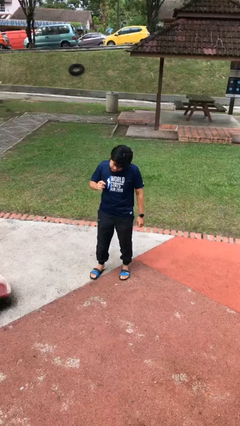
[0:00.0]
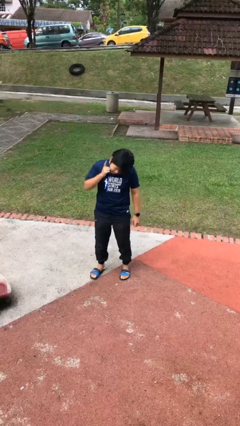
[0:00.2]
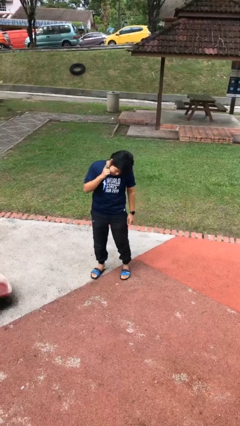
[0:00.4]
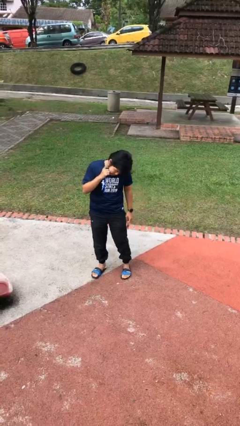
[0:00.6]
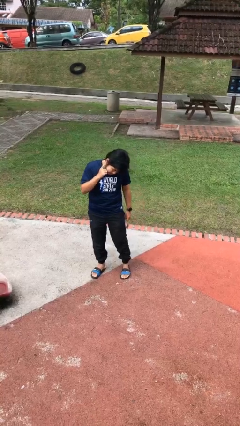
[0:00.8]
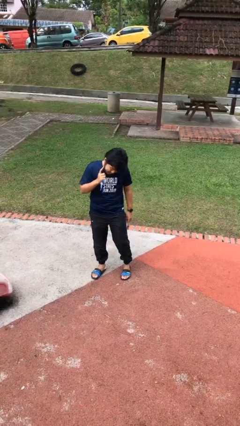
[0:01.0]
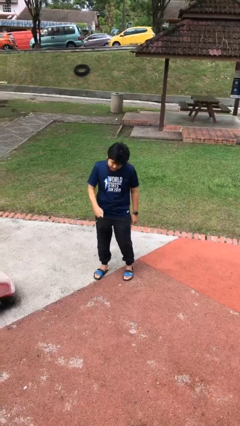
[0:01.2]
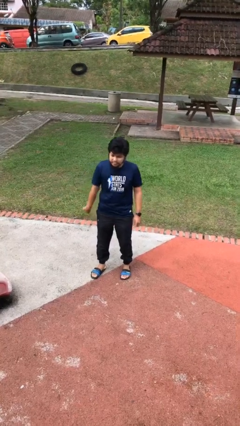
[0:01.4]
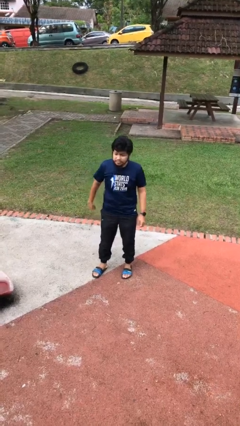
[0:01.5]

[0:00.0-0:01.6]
person gestures listen closely

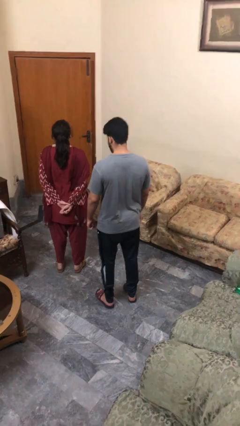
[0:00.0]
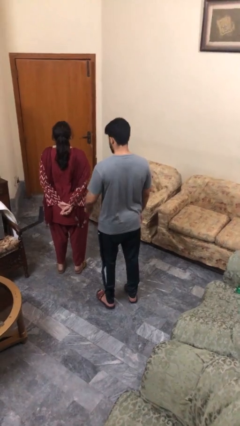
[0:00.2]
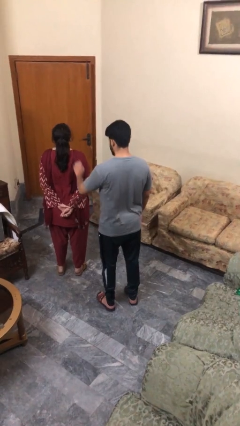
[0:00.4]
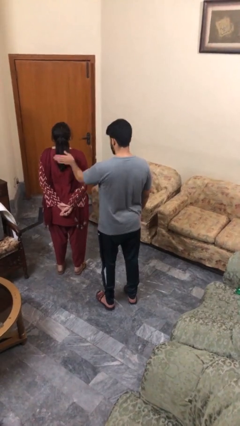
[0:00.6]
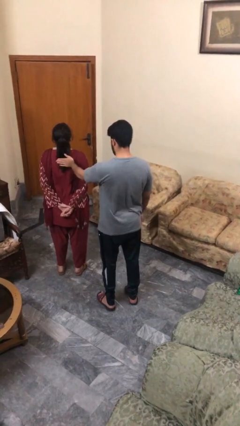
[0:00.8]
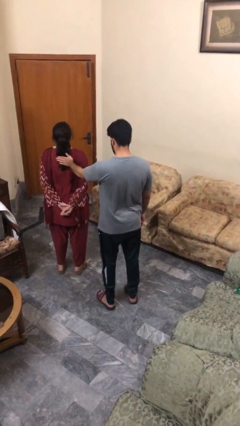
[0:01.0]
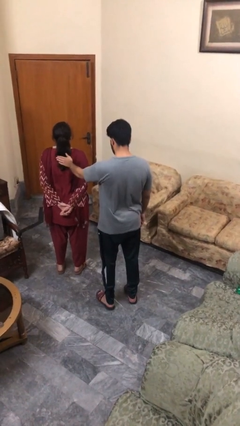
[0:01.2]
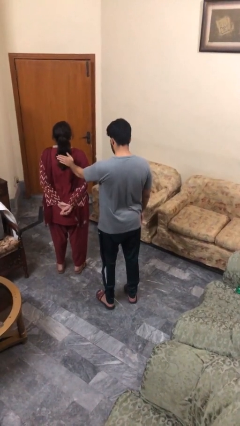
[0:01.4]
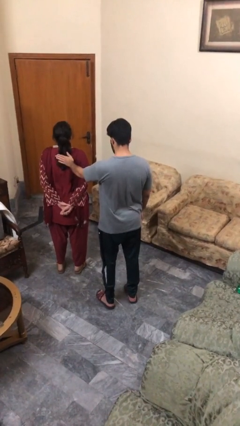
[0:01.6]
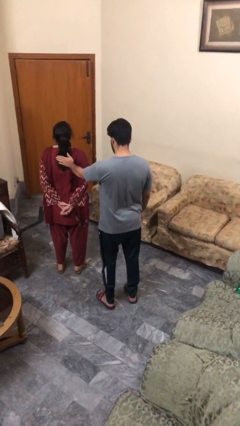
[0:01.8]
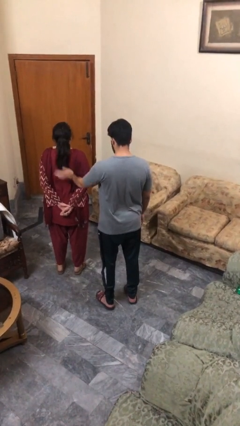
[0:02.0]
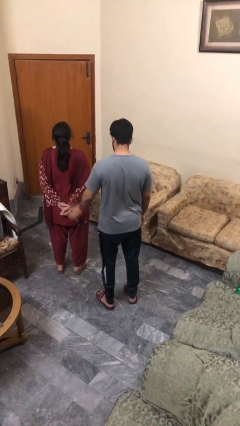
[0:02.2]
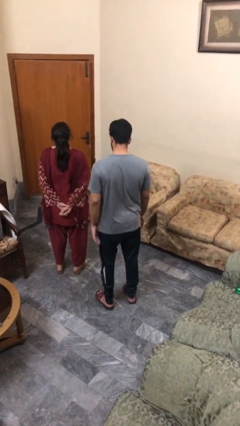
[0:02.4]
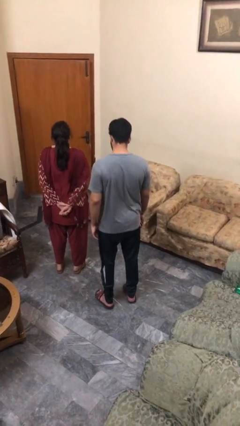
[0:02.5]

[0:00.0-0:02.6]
person touches back of person

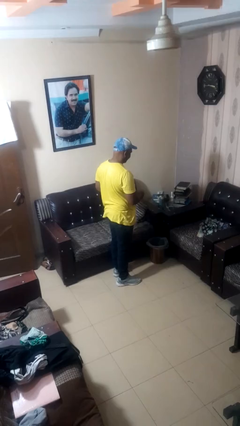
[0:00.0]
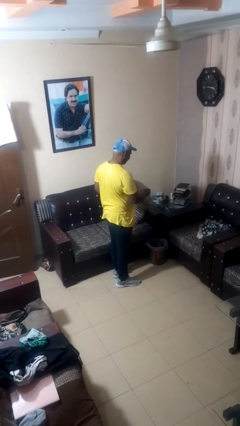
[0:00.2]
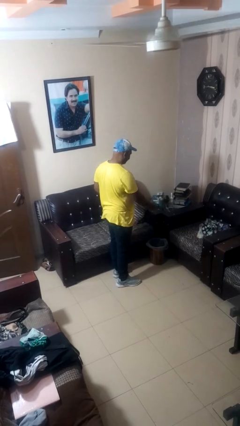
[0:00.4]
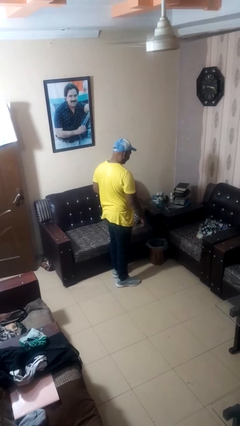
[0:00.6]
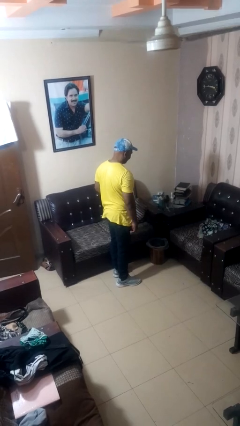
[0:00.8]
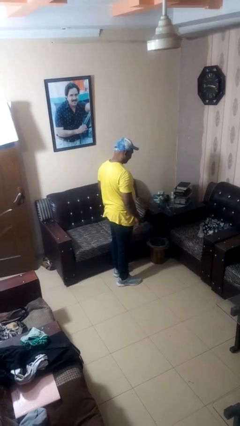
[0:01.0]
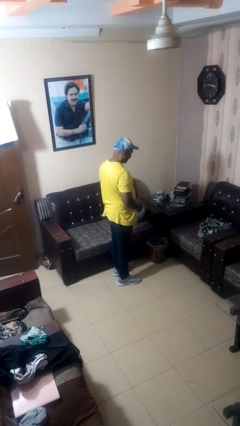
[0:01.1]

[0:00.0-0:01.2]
person discards trash

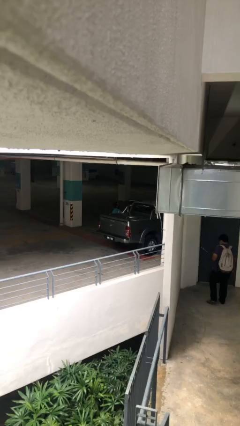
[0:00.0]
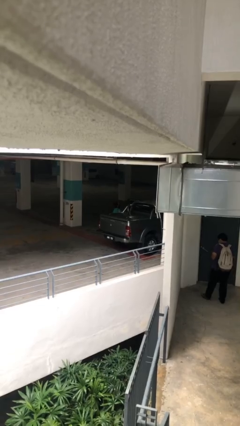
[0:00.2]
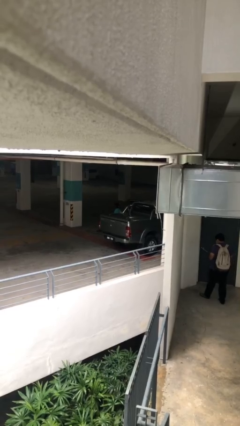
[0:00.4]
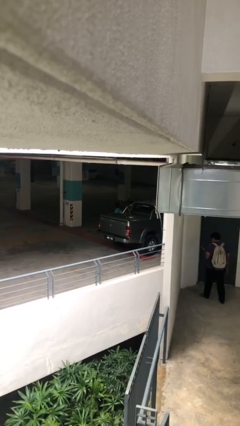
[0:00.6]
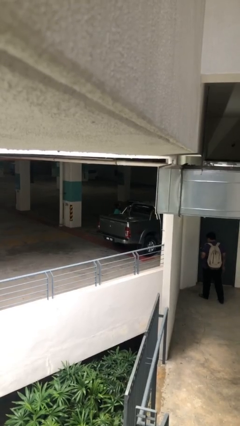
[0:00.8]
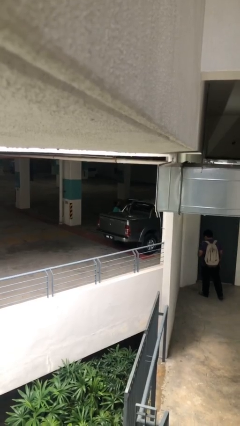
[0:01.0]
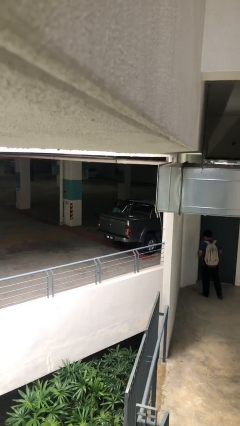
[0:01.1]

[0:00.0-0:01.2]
person opens car door

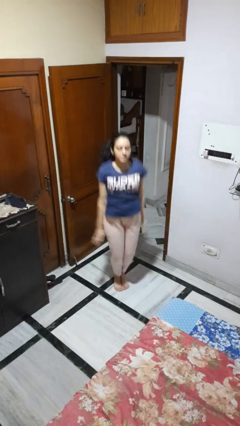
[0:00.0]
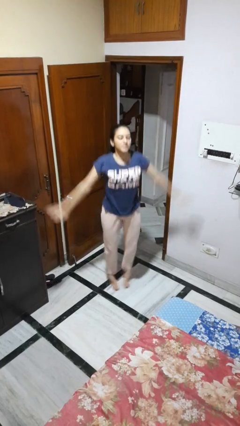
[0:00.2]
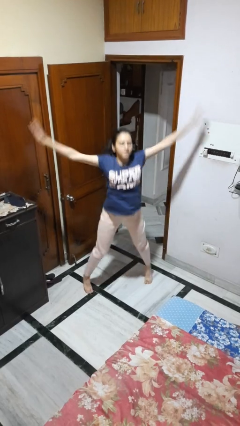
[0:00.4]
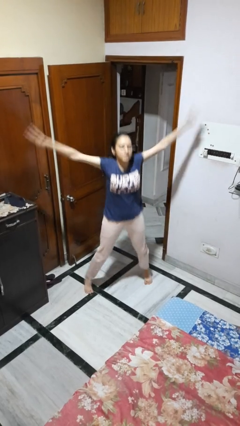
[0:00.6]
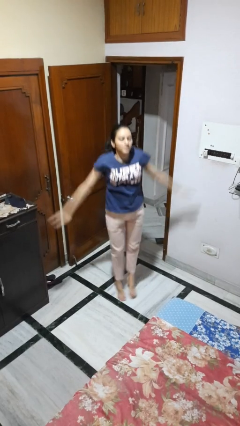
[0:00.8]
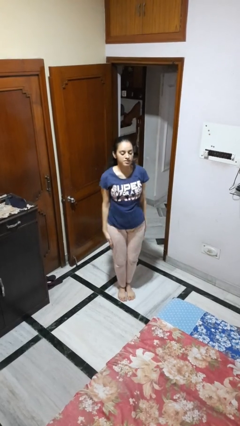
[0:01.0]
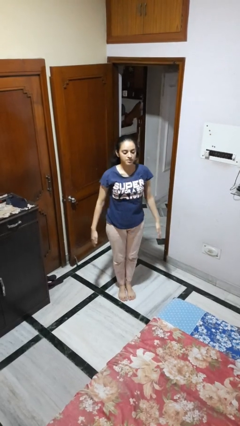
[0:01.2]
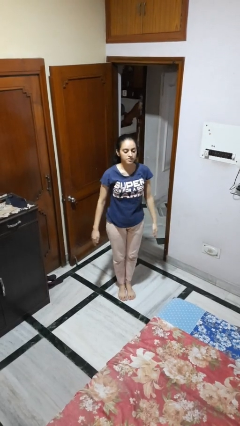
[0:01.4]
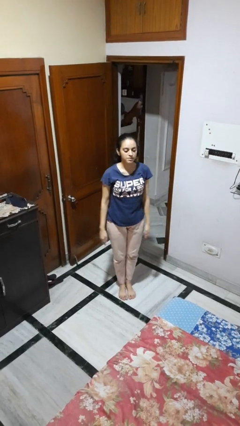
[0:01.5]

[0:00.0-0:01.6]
person exercises with jumping jacks

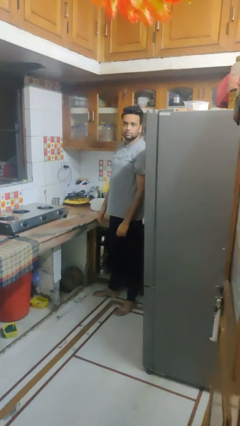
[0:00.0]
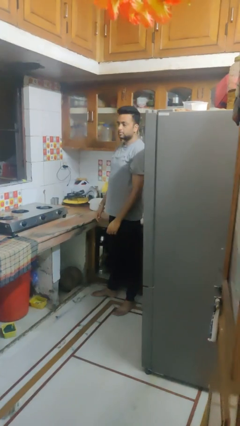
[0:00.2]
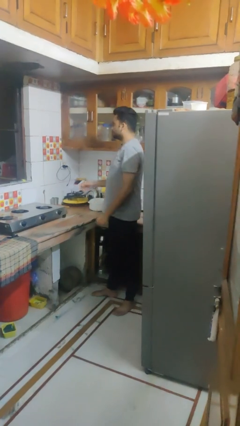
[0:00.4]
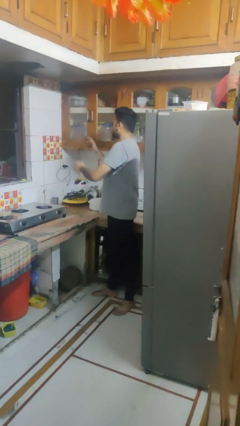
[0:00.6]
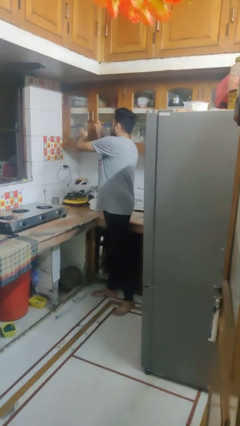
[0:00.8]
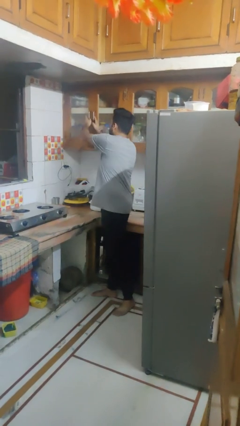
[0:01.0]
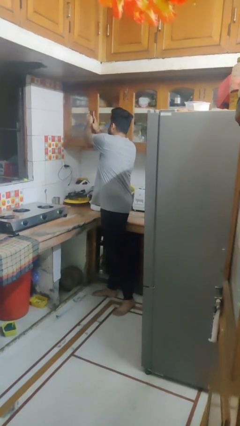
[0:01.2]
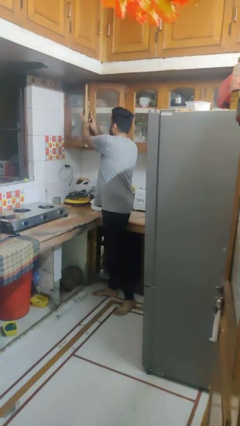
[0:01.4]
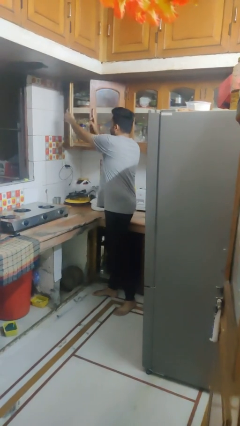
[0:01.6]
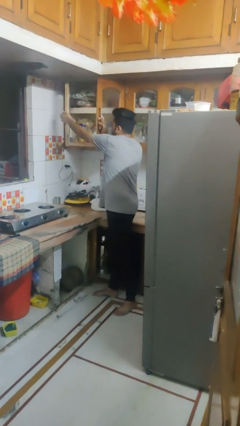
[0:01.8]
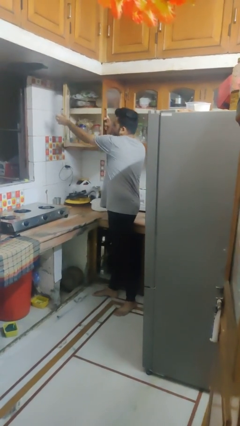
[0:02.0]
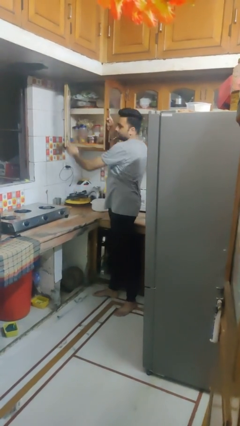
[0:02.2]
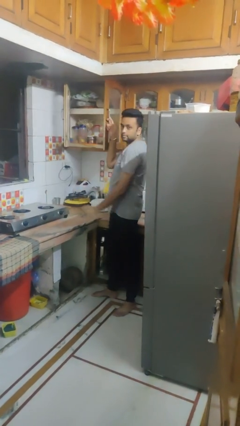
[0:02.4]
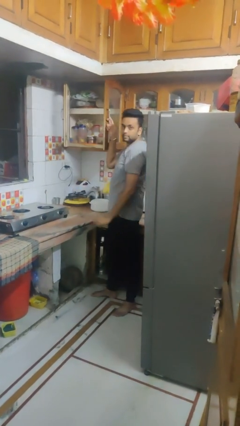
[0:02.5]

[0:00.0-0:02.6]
person opens cabinet

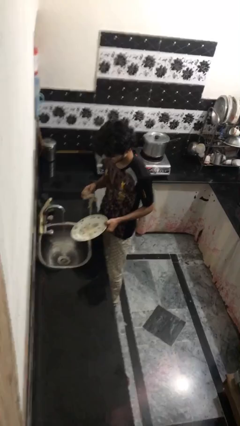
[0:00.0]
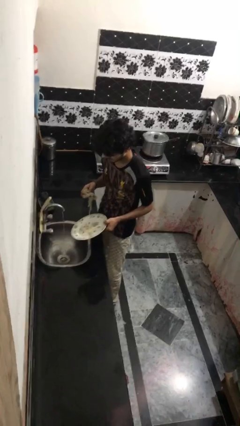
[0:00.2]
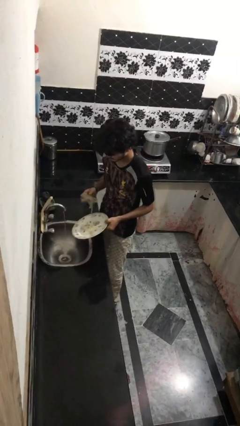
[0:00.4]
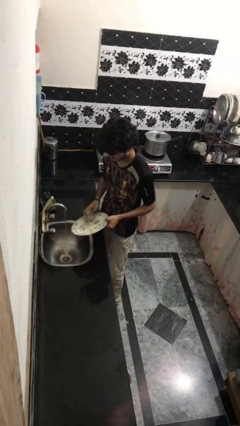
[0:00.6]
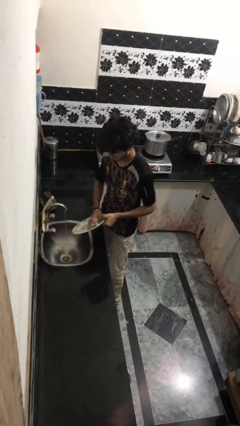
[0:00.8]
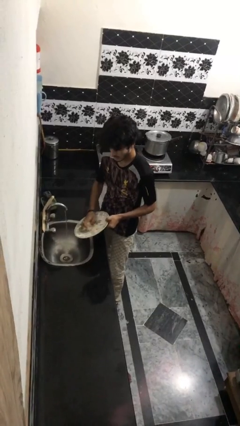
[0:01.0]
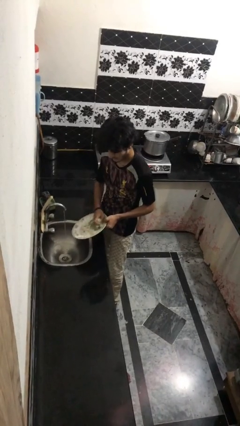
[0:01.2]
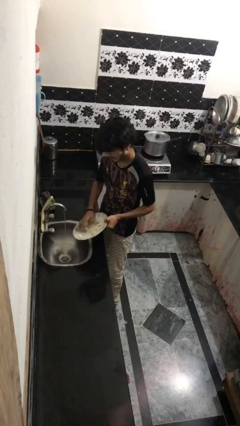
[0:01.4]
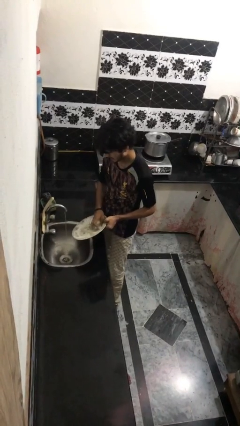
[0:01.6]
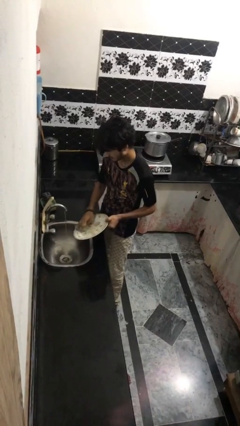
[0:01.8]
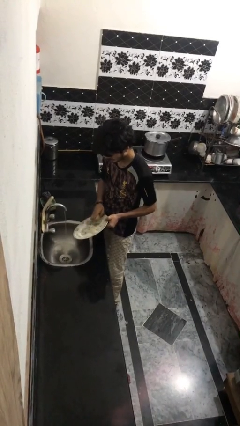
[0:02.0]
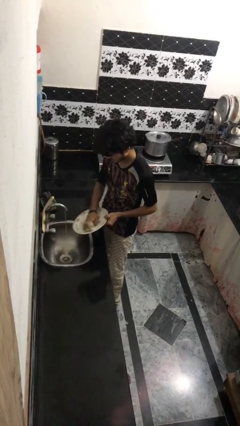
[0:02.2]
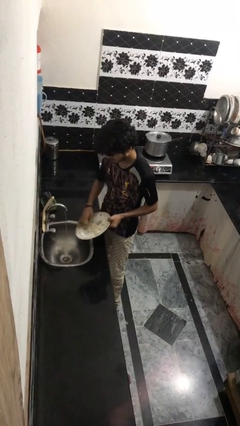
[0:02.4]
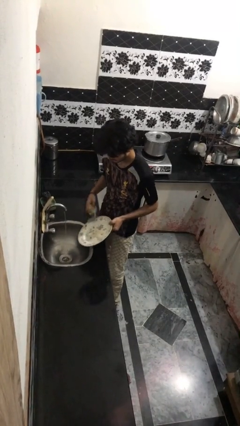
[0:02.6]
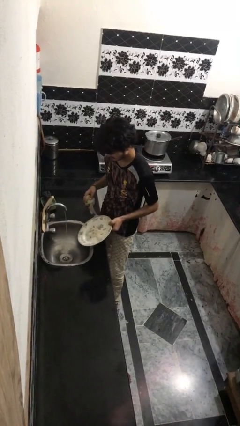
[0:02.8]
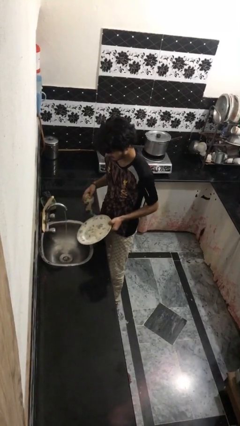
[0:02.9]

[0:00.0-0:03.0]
person washes dish

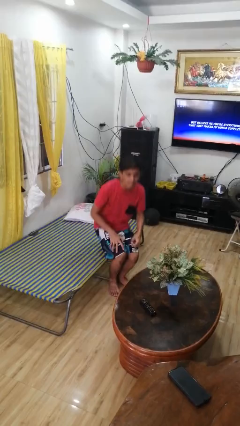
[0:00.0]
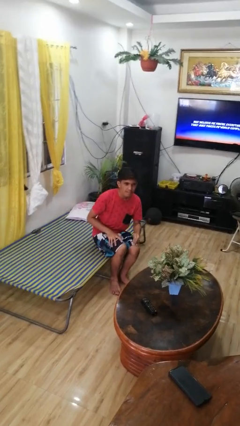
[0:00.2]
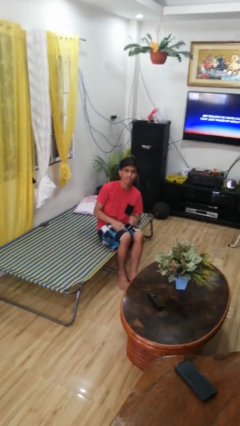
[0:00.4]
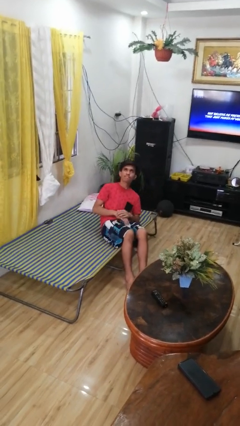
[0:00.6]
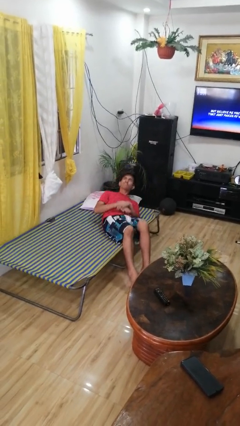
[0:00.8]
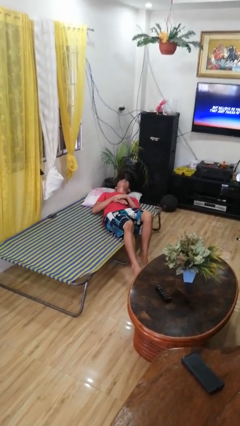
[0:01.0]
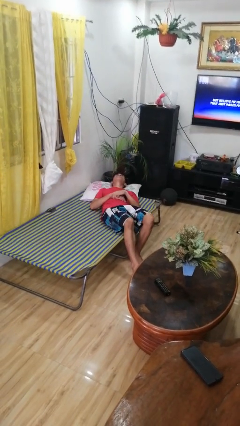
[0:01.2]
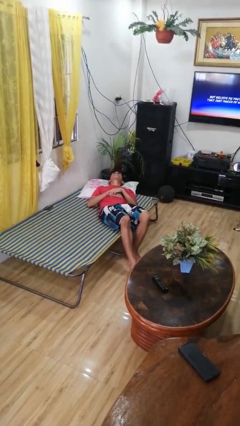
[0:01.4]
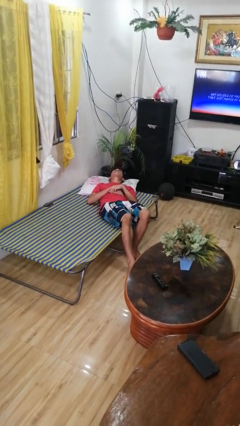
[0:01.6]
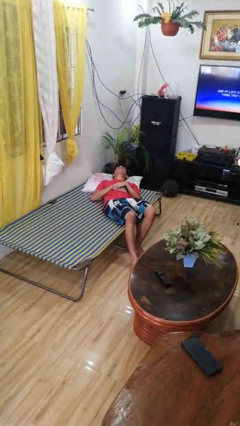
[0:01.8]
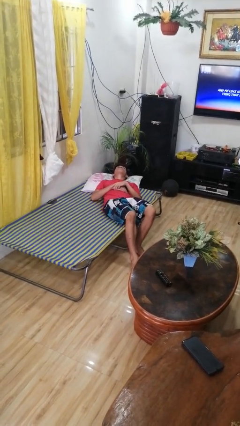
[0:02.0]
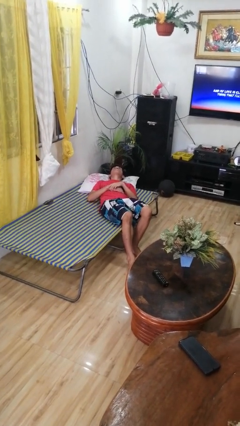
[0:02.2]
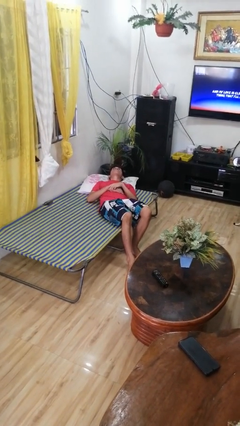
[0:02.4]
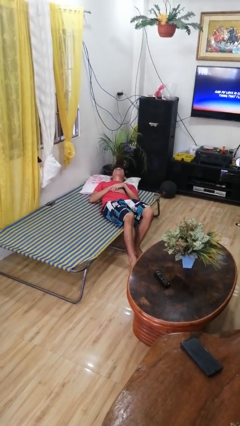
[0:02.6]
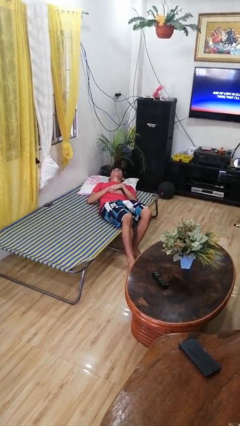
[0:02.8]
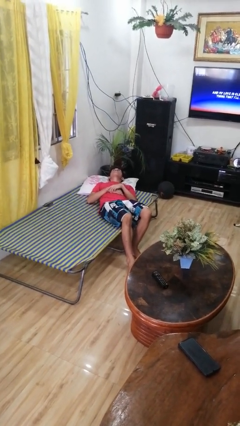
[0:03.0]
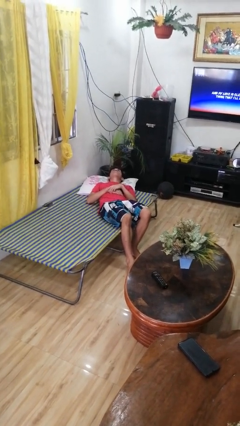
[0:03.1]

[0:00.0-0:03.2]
person lies down on bed
